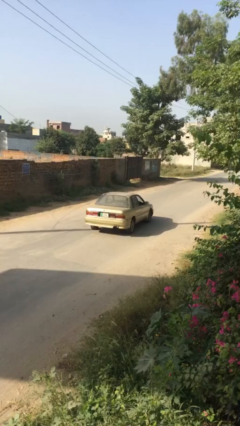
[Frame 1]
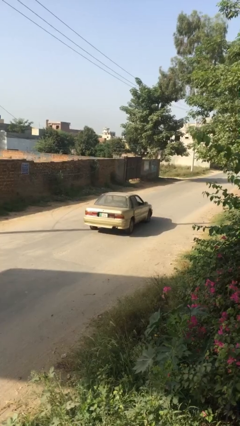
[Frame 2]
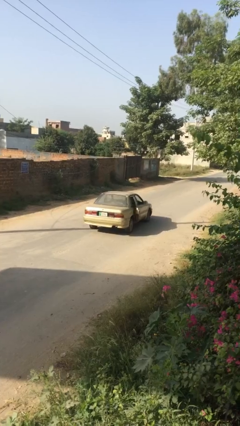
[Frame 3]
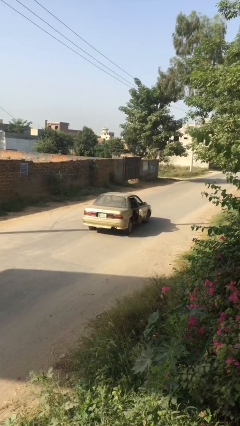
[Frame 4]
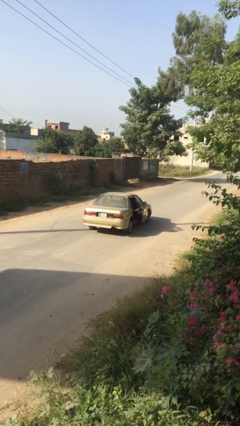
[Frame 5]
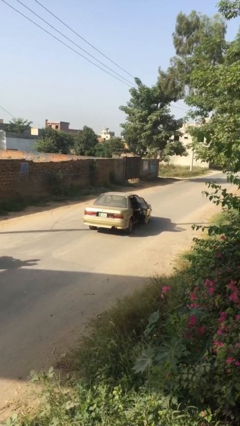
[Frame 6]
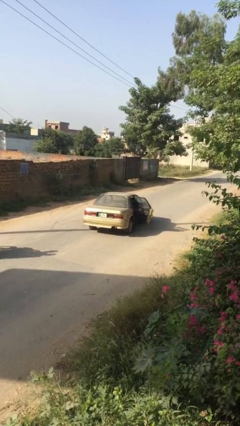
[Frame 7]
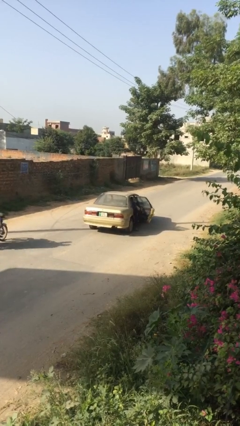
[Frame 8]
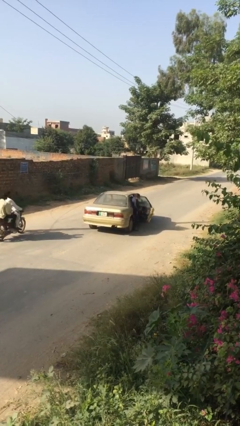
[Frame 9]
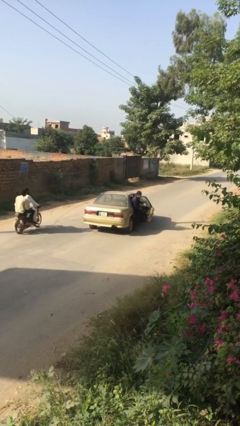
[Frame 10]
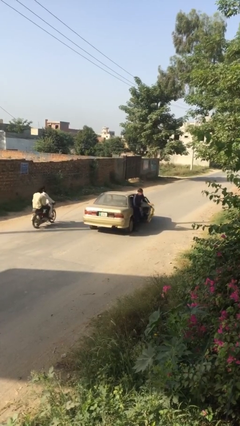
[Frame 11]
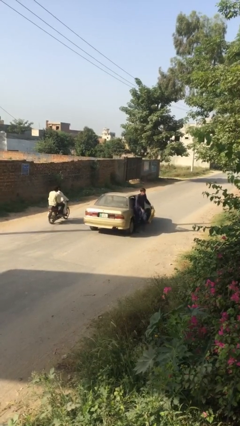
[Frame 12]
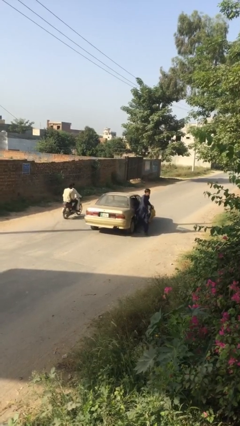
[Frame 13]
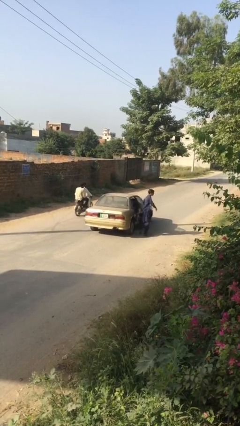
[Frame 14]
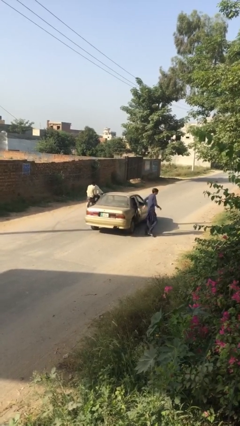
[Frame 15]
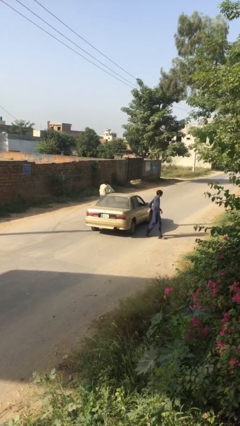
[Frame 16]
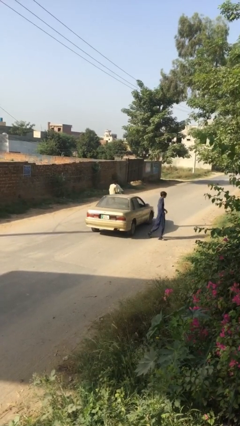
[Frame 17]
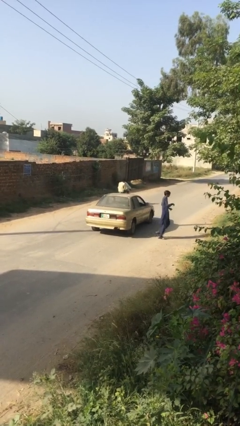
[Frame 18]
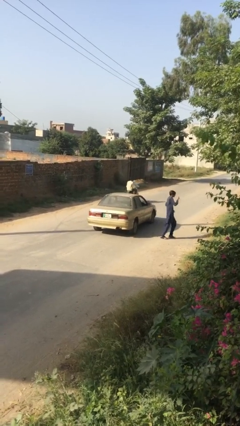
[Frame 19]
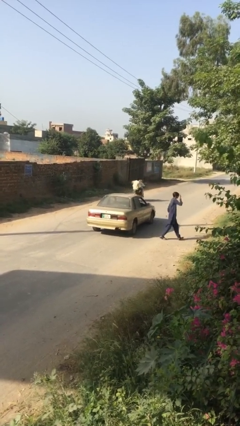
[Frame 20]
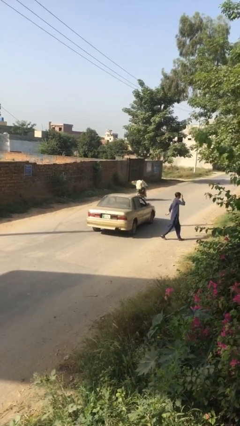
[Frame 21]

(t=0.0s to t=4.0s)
car drops off person

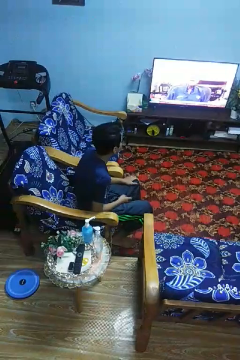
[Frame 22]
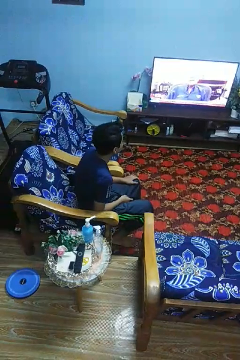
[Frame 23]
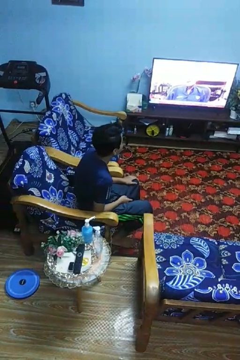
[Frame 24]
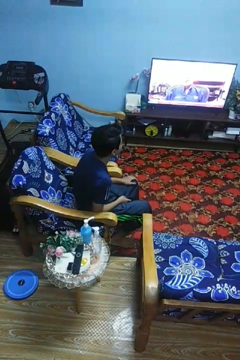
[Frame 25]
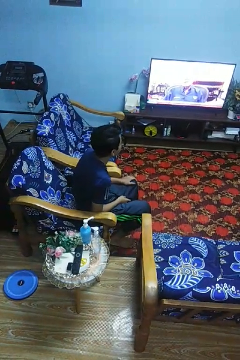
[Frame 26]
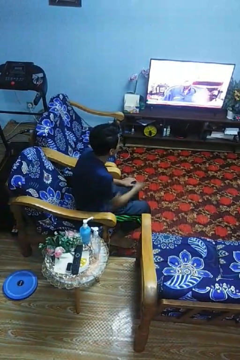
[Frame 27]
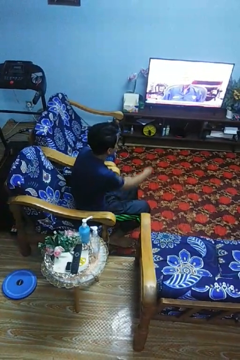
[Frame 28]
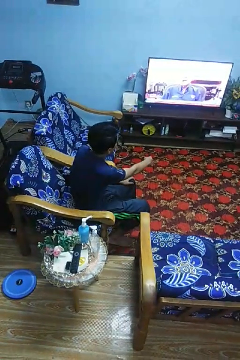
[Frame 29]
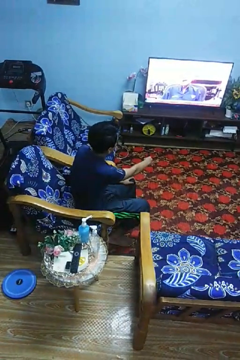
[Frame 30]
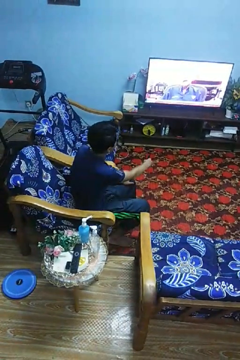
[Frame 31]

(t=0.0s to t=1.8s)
person uses television remote

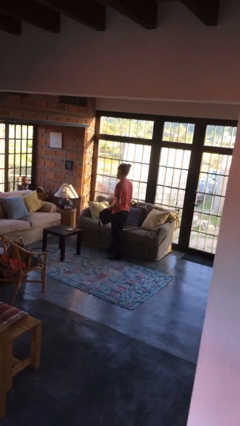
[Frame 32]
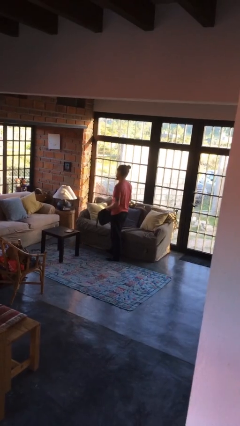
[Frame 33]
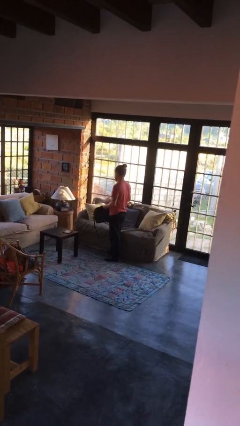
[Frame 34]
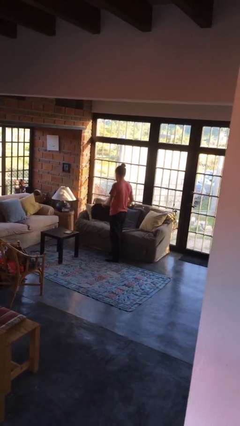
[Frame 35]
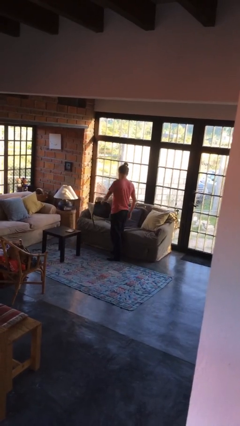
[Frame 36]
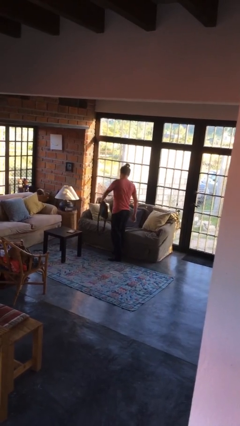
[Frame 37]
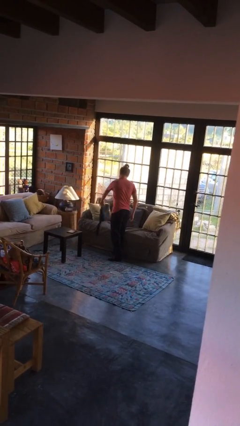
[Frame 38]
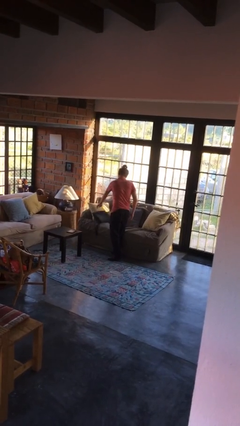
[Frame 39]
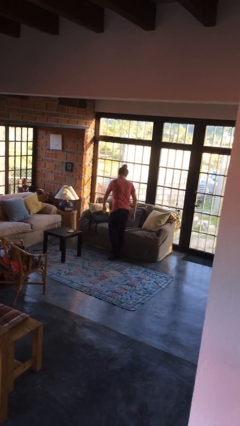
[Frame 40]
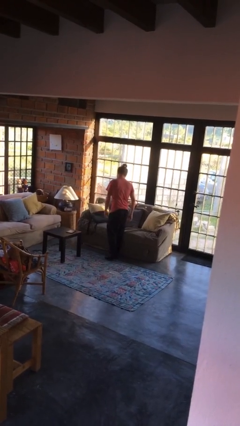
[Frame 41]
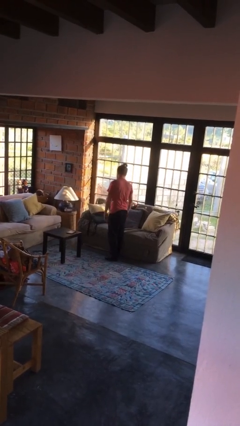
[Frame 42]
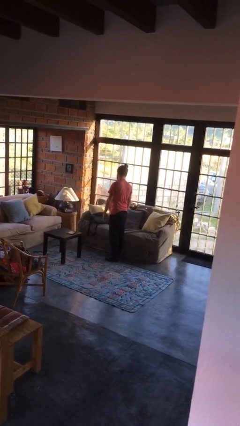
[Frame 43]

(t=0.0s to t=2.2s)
person puts down object on couch

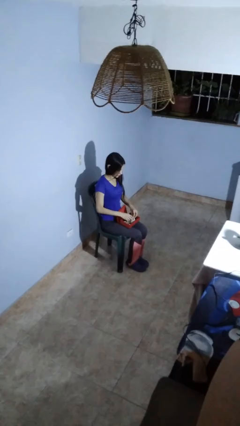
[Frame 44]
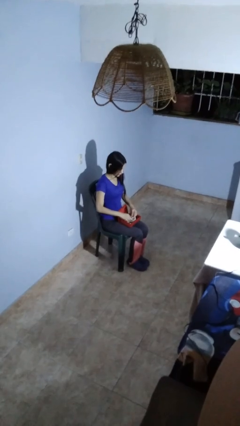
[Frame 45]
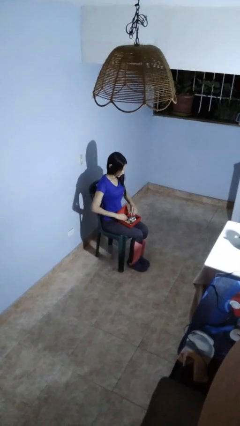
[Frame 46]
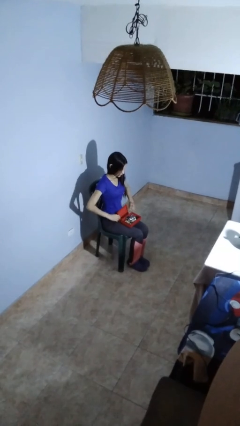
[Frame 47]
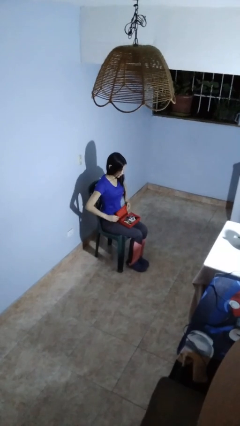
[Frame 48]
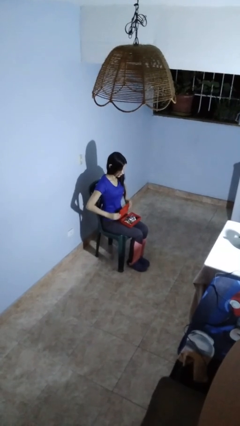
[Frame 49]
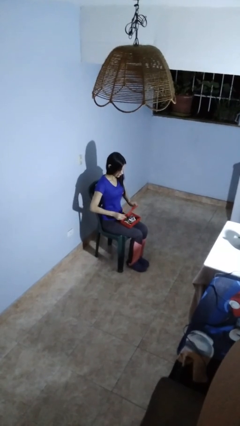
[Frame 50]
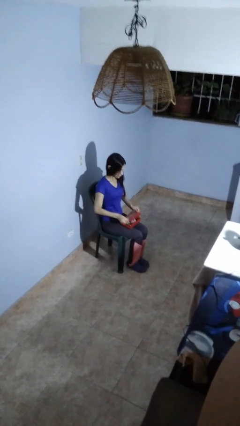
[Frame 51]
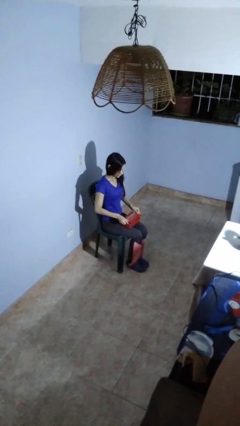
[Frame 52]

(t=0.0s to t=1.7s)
person closes jewelry box

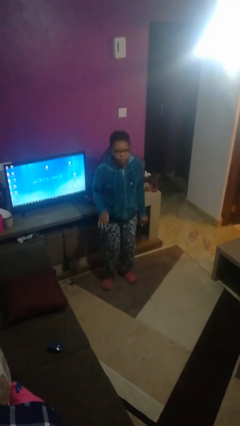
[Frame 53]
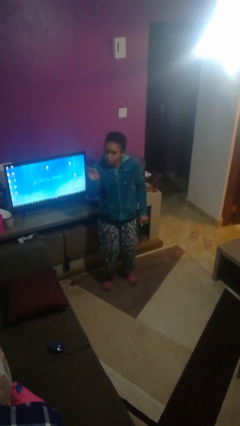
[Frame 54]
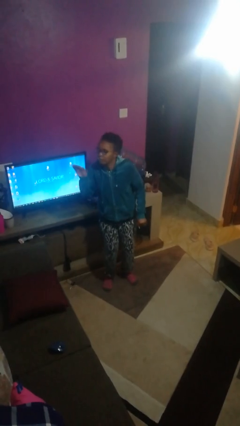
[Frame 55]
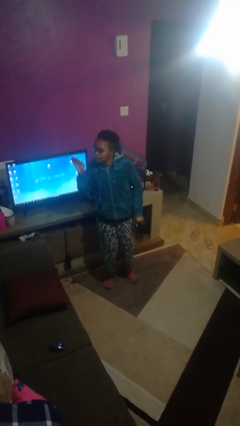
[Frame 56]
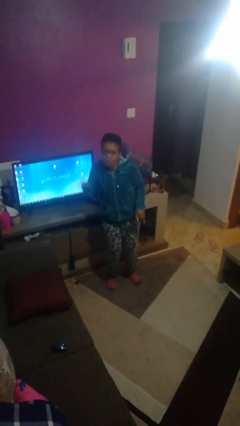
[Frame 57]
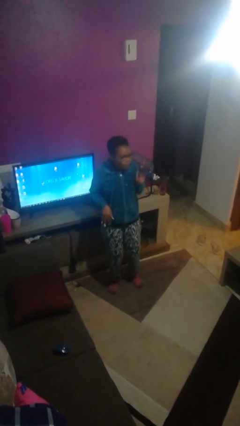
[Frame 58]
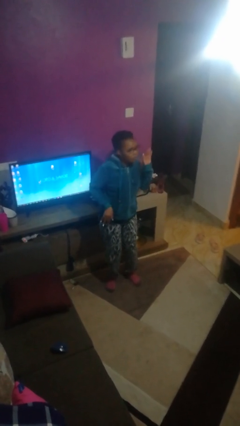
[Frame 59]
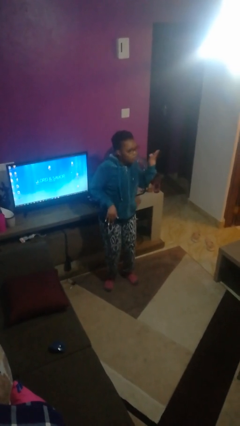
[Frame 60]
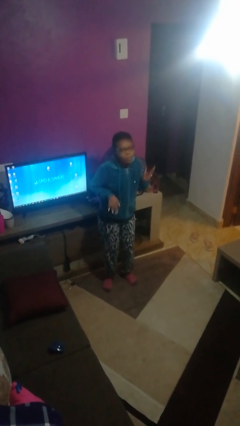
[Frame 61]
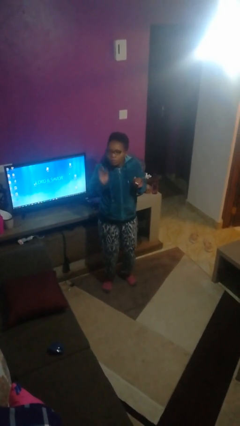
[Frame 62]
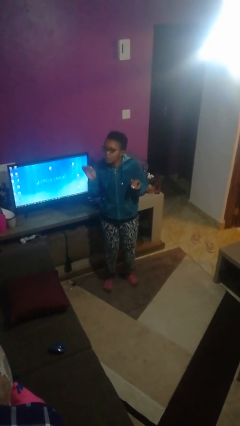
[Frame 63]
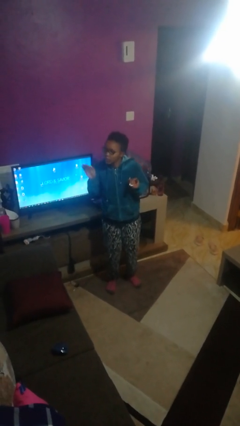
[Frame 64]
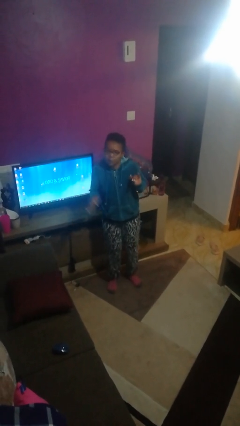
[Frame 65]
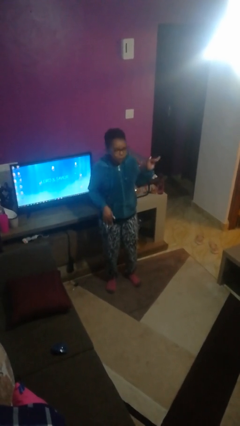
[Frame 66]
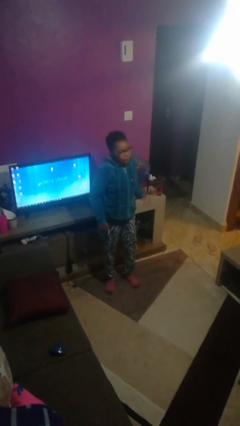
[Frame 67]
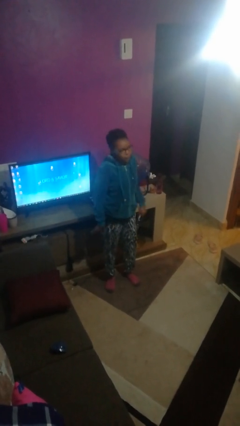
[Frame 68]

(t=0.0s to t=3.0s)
person dances in place

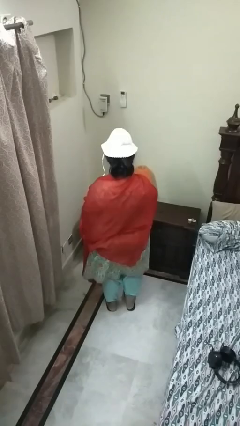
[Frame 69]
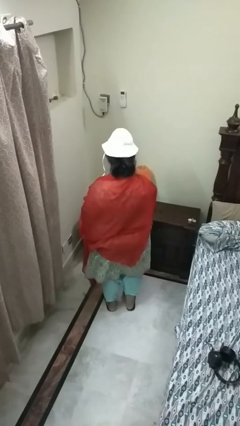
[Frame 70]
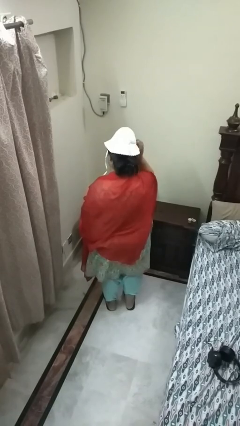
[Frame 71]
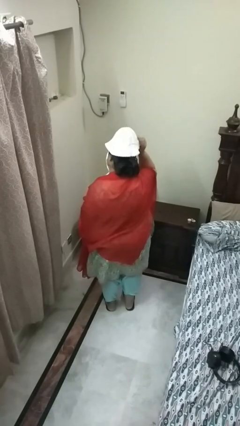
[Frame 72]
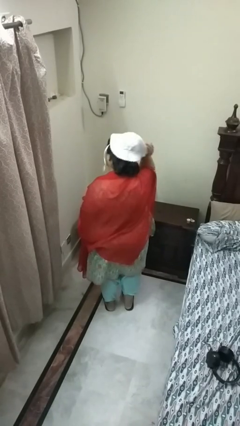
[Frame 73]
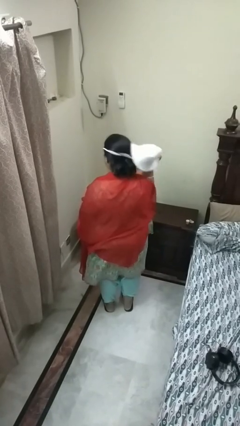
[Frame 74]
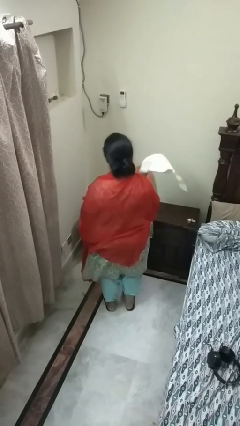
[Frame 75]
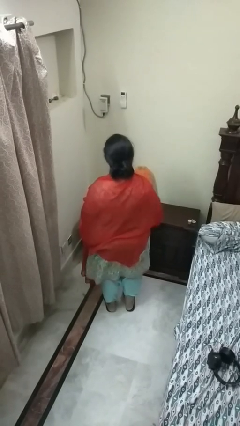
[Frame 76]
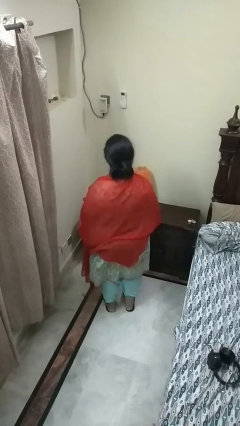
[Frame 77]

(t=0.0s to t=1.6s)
person takes off hat

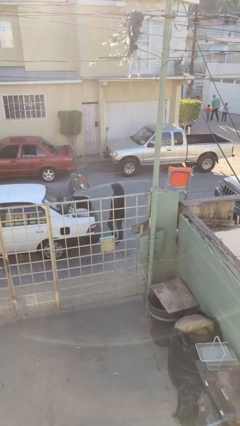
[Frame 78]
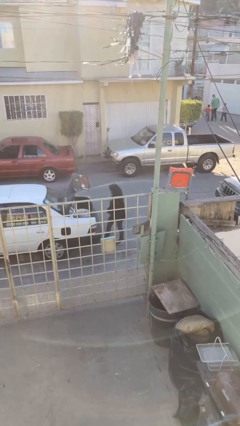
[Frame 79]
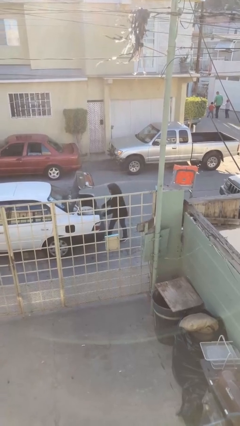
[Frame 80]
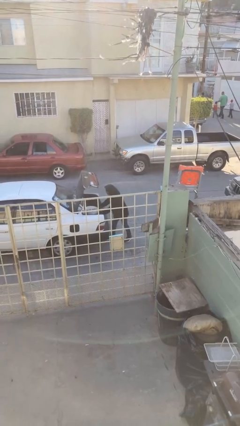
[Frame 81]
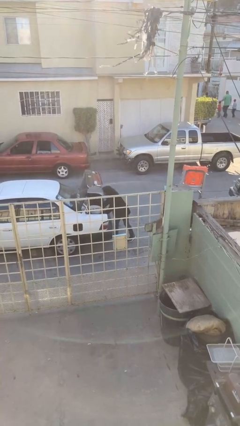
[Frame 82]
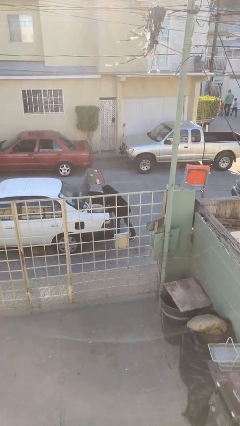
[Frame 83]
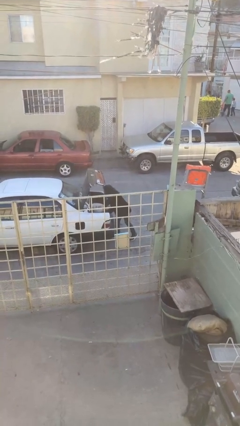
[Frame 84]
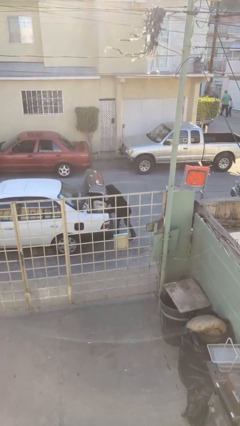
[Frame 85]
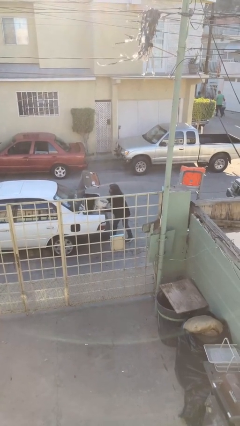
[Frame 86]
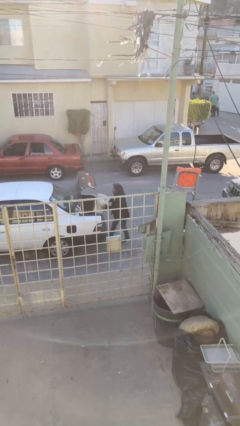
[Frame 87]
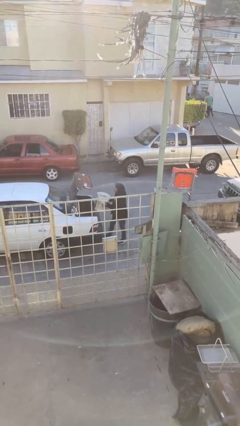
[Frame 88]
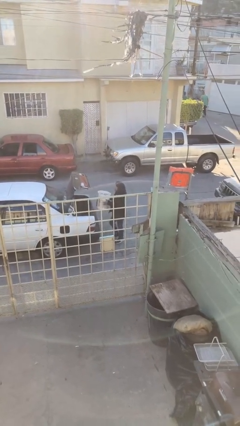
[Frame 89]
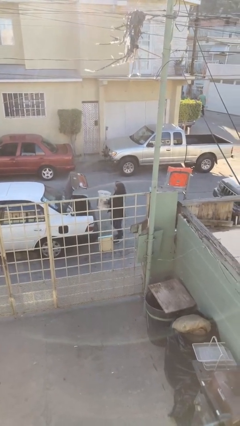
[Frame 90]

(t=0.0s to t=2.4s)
person unloads car

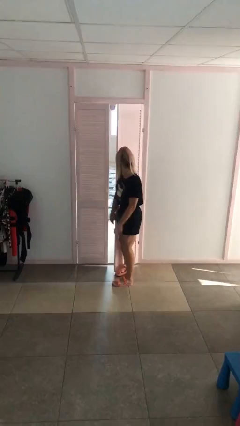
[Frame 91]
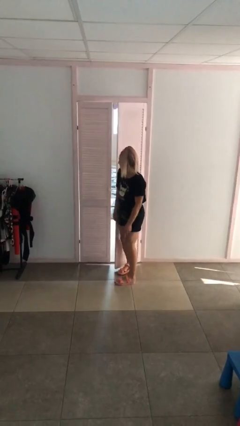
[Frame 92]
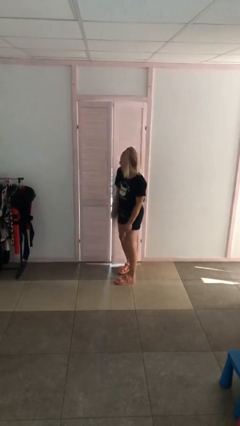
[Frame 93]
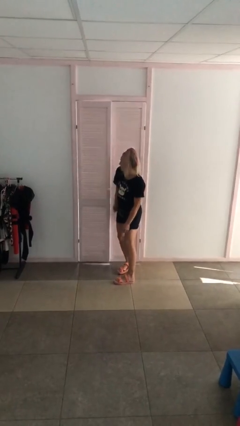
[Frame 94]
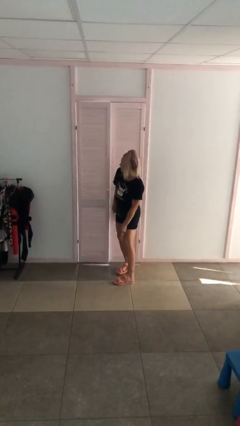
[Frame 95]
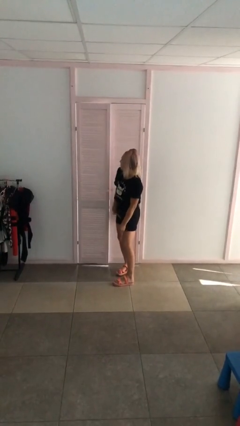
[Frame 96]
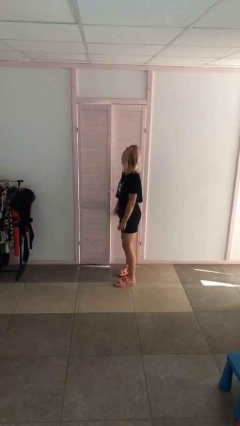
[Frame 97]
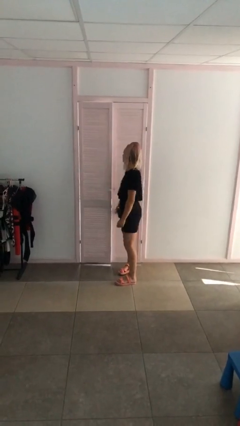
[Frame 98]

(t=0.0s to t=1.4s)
person closes door with hip
